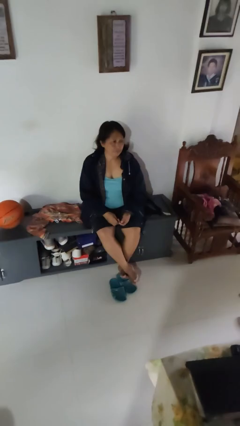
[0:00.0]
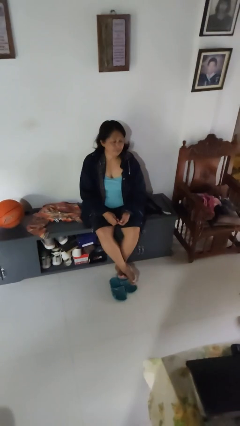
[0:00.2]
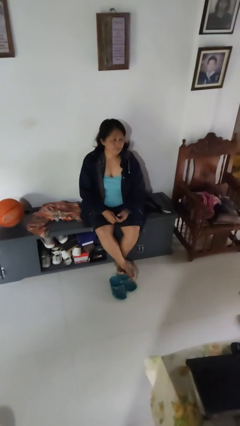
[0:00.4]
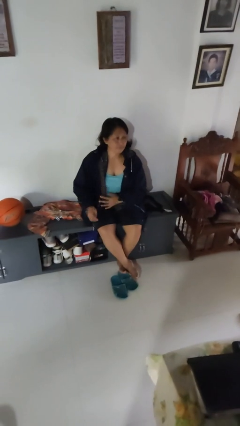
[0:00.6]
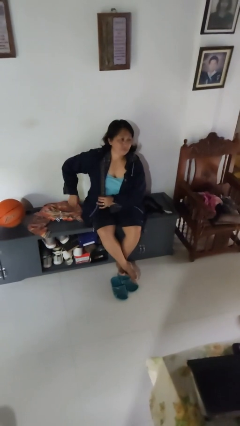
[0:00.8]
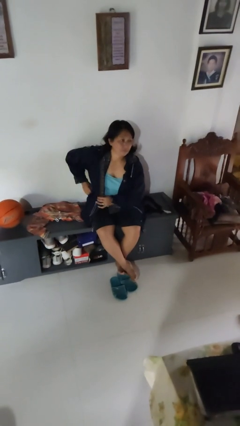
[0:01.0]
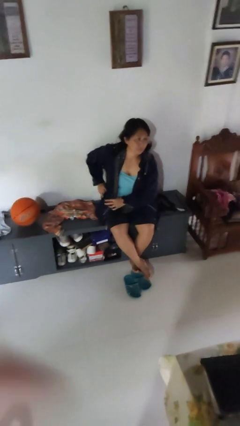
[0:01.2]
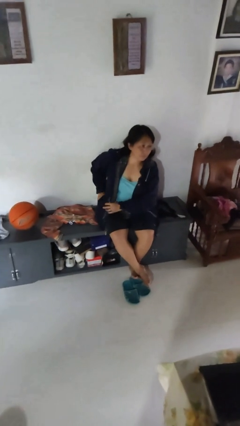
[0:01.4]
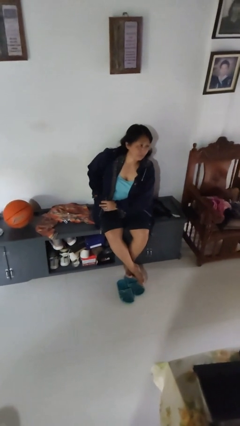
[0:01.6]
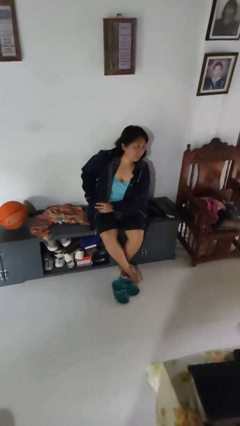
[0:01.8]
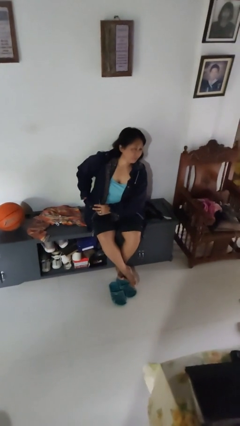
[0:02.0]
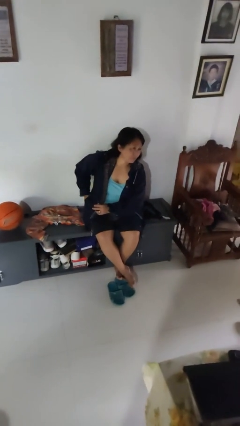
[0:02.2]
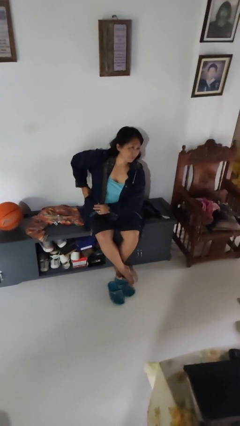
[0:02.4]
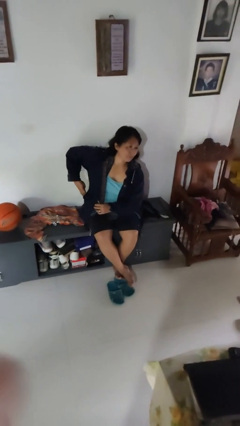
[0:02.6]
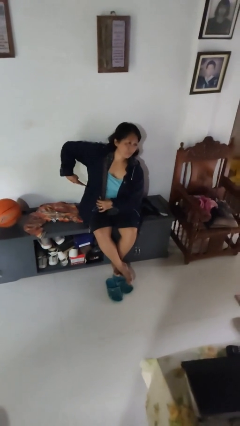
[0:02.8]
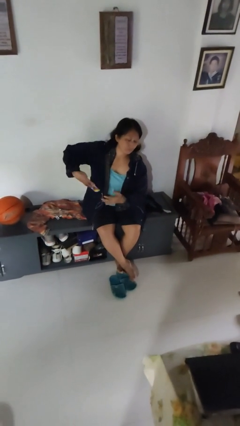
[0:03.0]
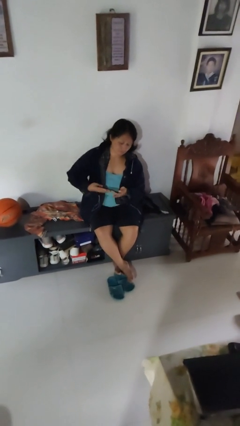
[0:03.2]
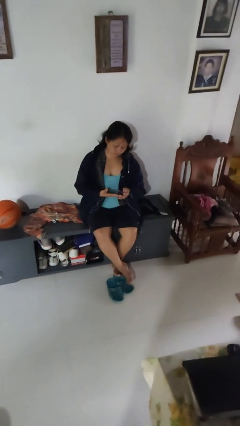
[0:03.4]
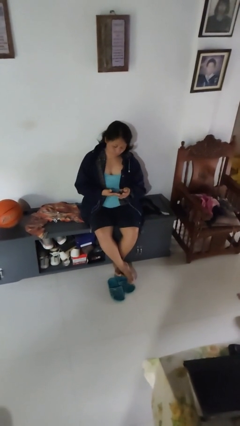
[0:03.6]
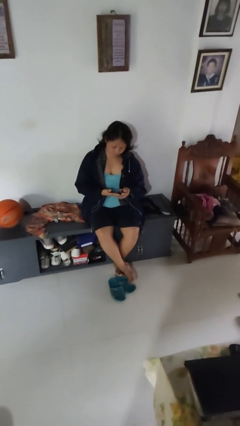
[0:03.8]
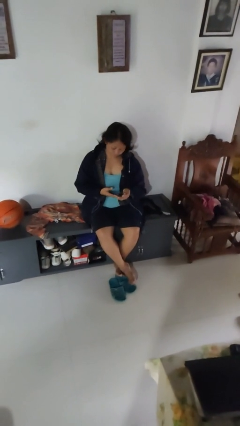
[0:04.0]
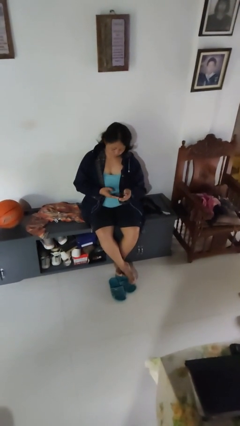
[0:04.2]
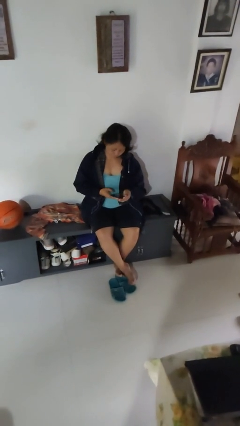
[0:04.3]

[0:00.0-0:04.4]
person takes phone from pocket

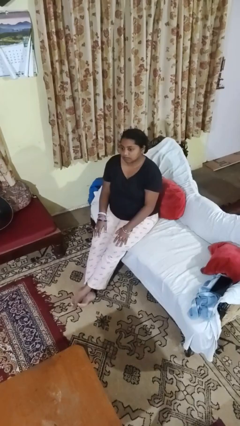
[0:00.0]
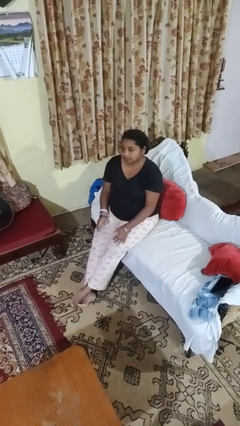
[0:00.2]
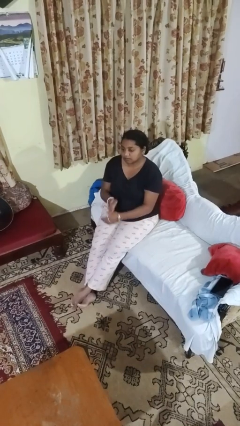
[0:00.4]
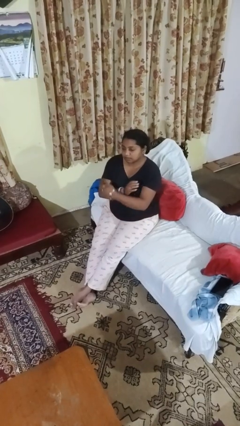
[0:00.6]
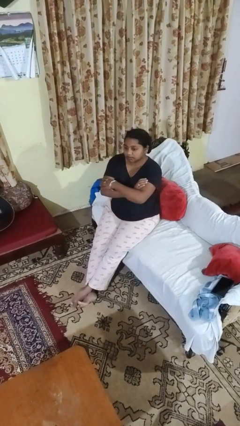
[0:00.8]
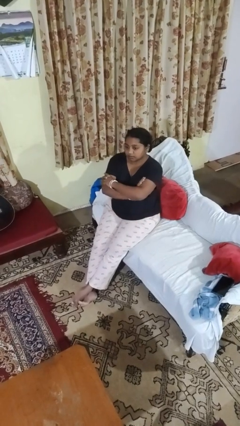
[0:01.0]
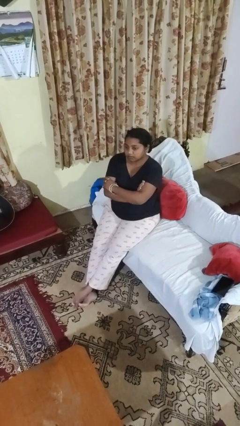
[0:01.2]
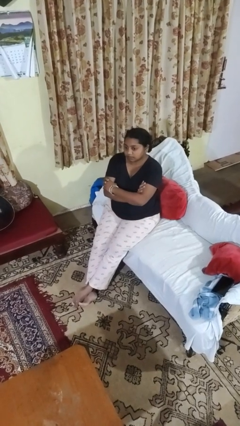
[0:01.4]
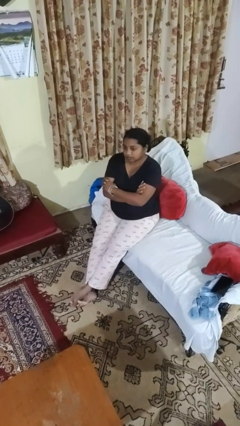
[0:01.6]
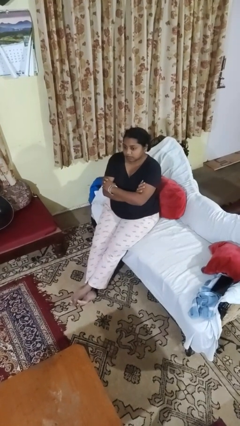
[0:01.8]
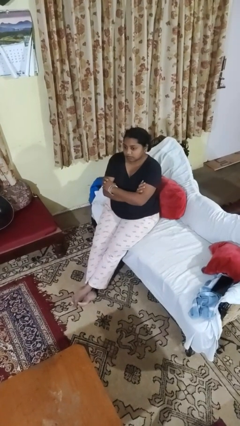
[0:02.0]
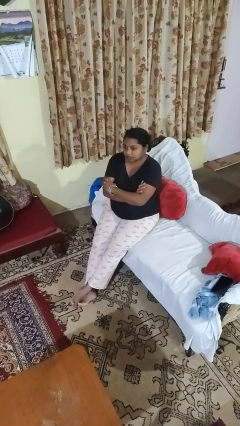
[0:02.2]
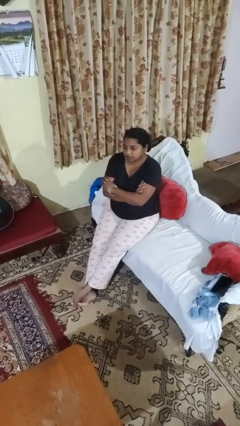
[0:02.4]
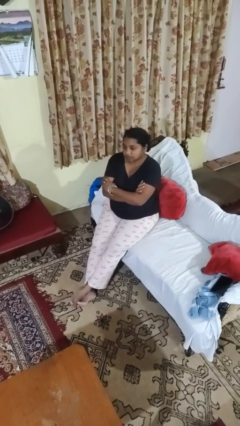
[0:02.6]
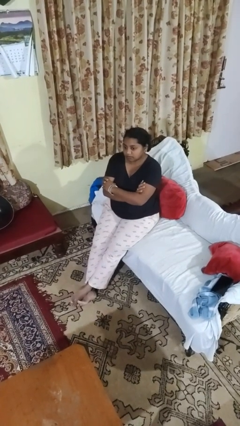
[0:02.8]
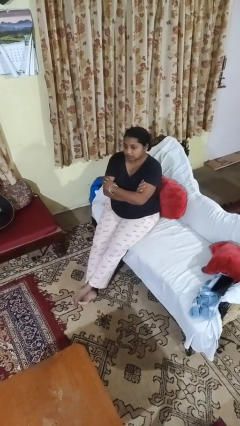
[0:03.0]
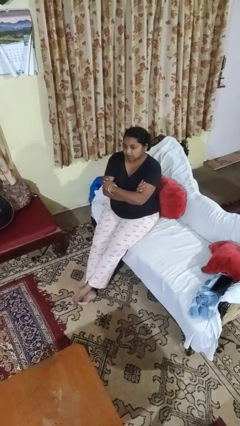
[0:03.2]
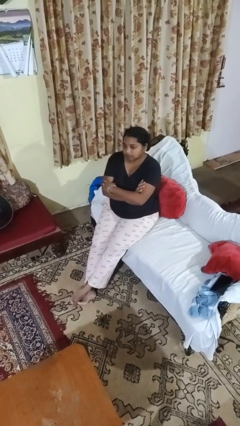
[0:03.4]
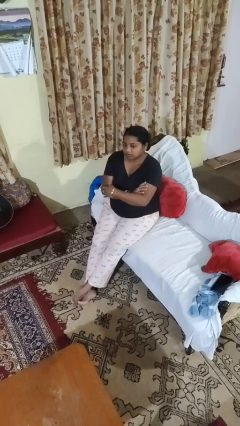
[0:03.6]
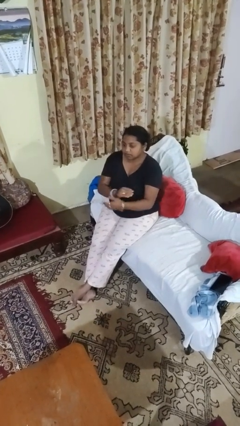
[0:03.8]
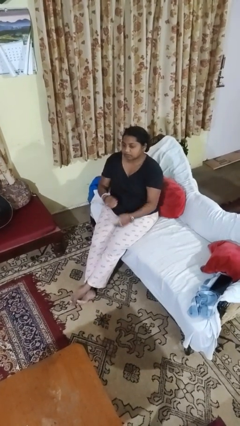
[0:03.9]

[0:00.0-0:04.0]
person crosses arms

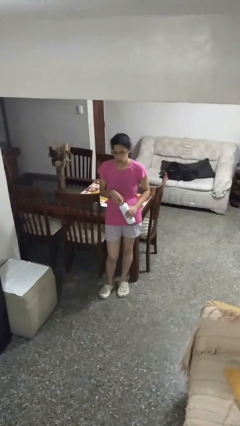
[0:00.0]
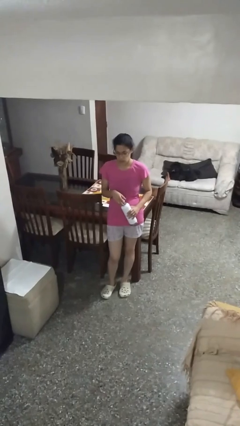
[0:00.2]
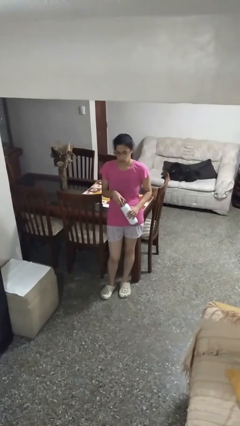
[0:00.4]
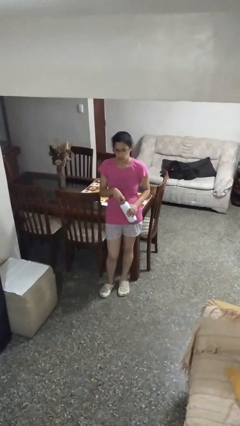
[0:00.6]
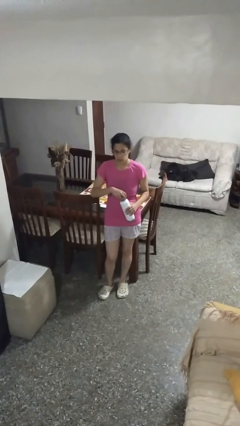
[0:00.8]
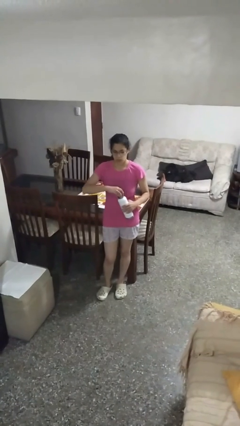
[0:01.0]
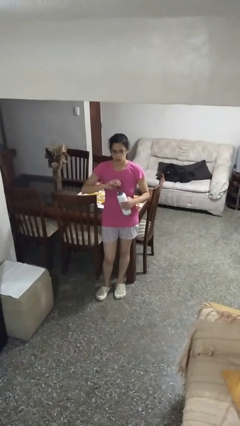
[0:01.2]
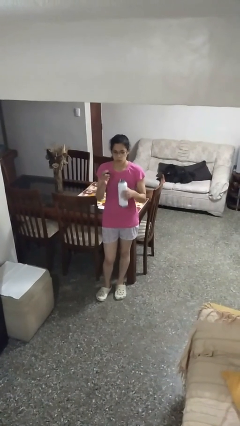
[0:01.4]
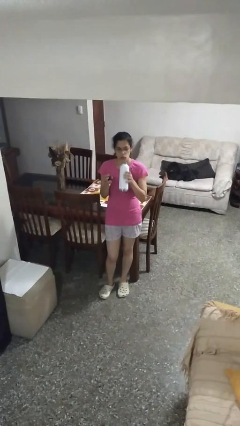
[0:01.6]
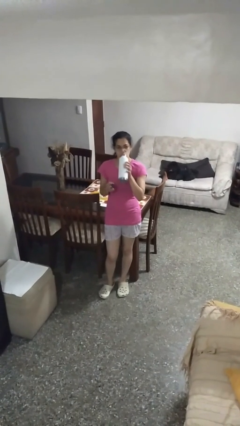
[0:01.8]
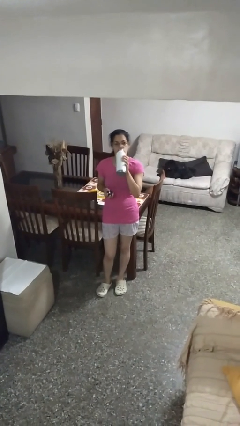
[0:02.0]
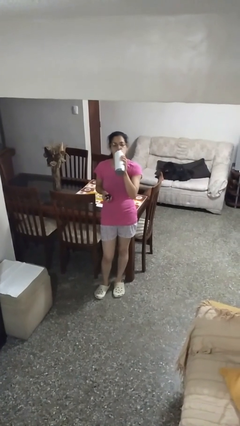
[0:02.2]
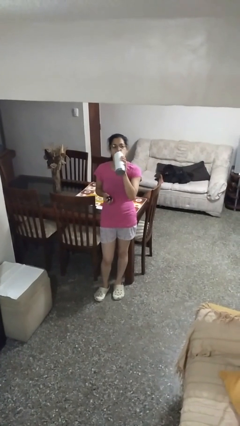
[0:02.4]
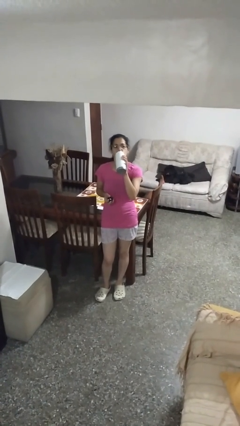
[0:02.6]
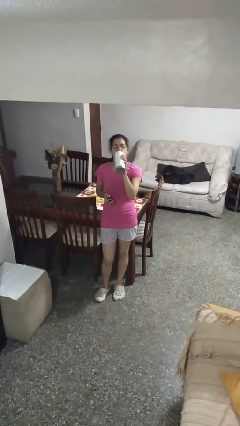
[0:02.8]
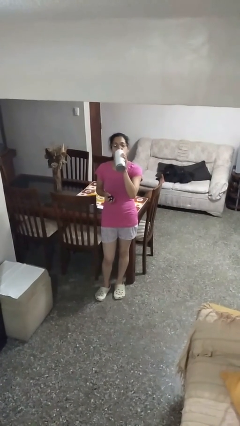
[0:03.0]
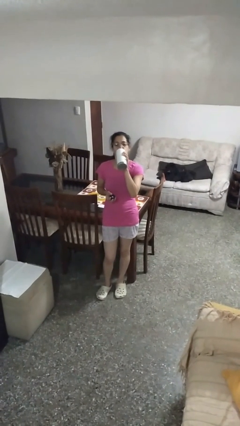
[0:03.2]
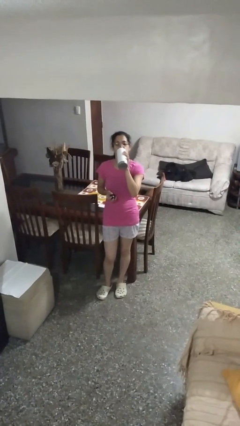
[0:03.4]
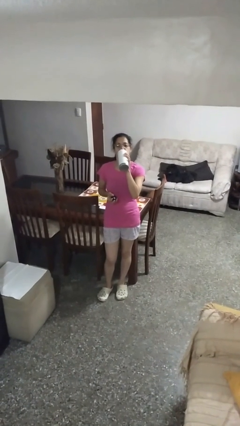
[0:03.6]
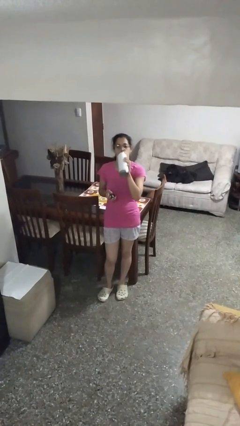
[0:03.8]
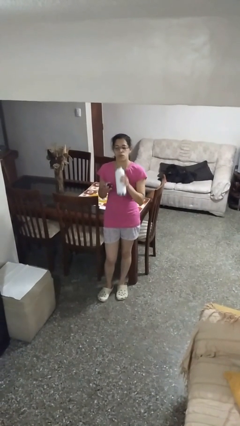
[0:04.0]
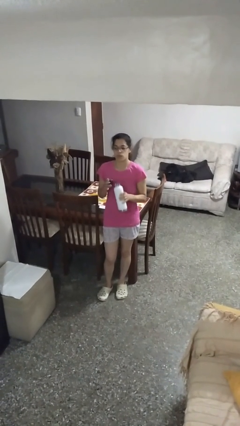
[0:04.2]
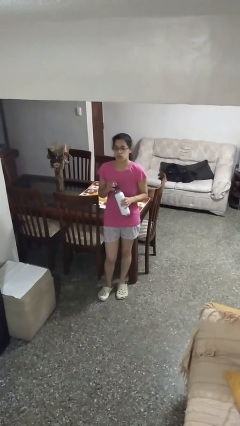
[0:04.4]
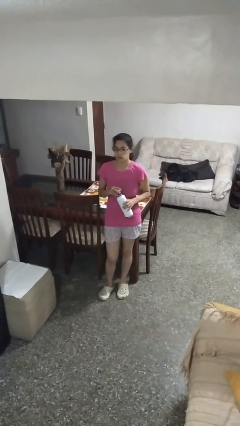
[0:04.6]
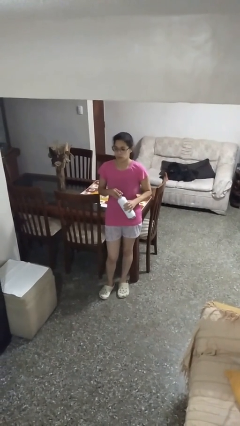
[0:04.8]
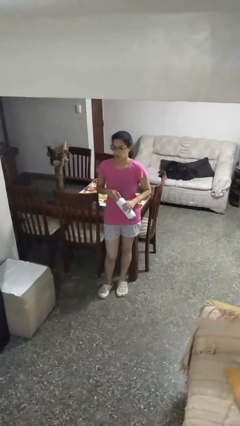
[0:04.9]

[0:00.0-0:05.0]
person drinks from bottle

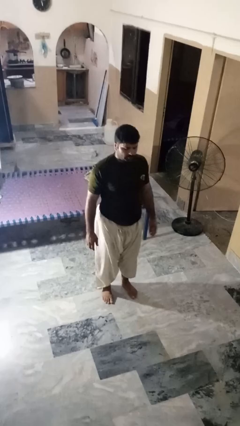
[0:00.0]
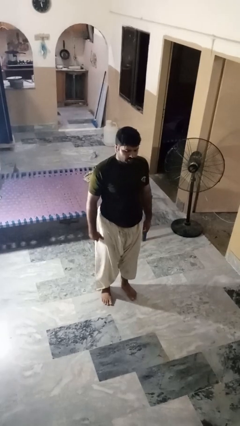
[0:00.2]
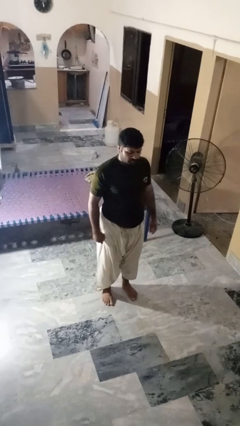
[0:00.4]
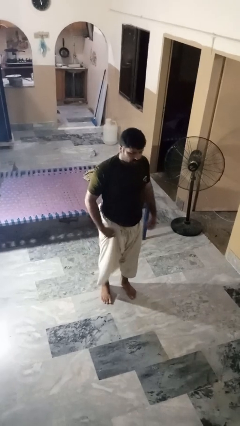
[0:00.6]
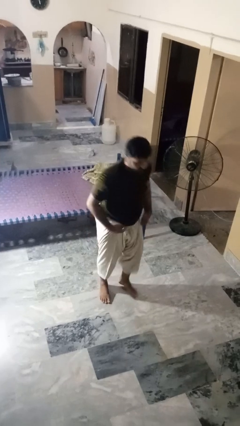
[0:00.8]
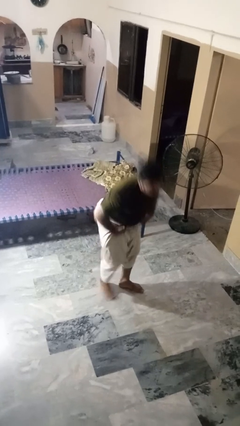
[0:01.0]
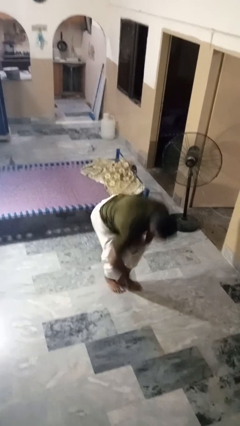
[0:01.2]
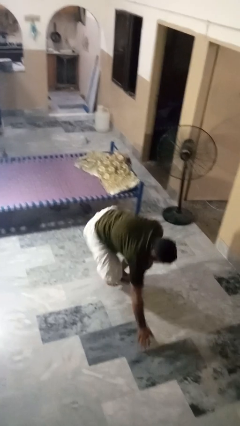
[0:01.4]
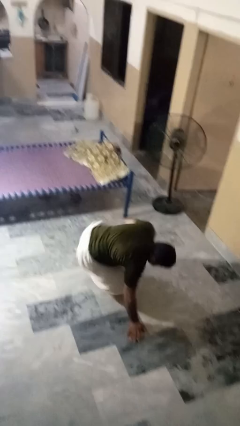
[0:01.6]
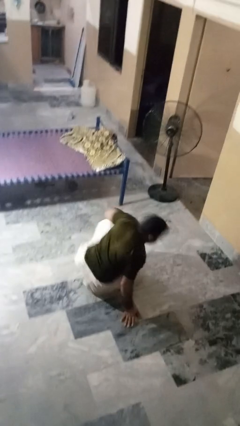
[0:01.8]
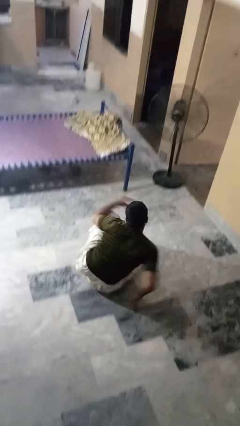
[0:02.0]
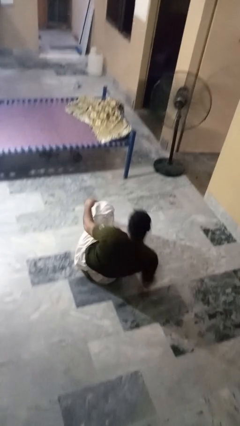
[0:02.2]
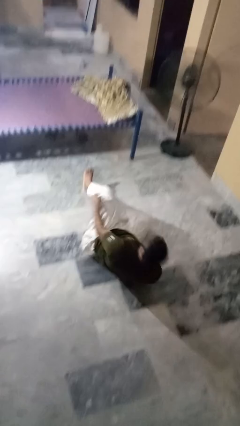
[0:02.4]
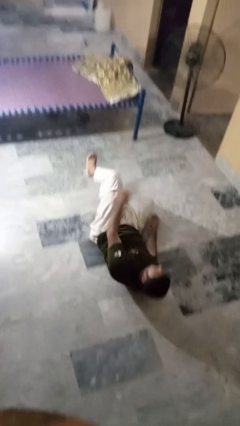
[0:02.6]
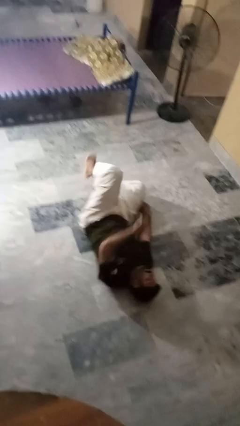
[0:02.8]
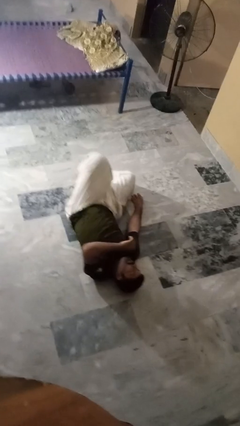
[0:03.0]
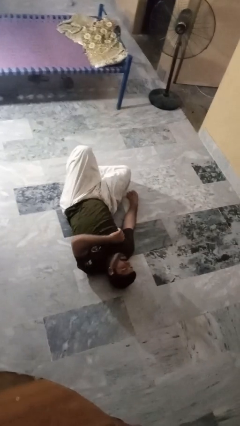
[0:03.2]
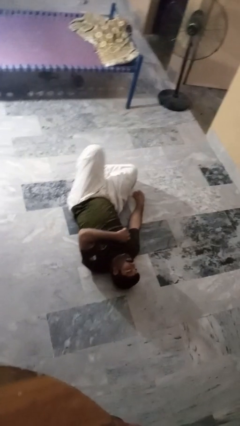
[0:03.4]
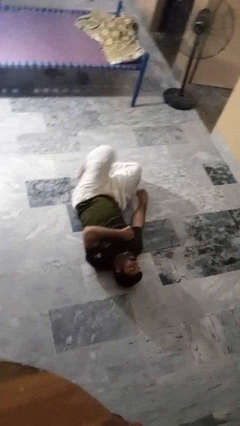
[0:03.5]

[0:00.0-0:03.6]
person falls while standing

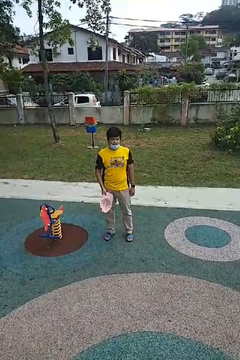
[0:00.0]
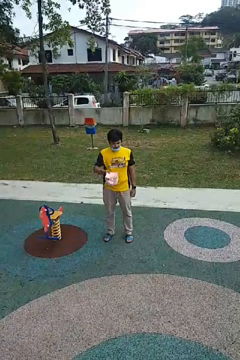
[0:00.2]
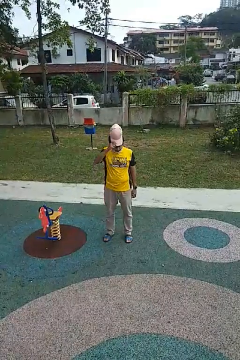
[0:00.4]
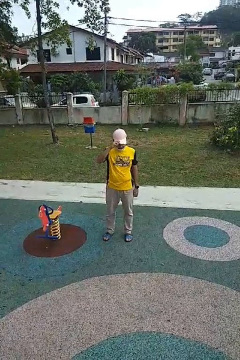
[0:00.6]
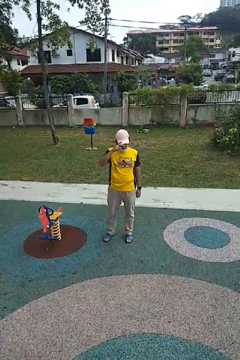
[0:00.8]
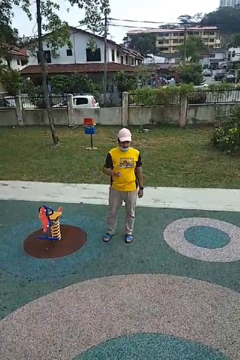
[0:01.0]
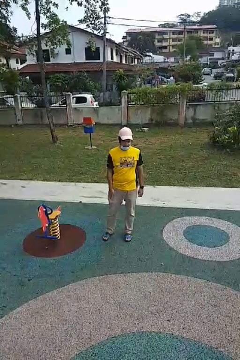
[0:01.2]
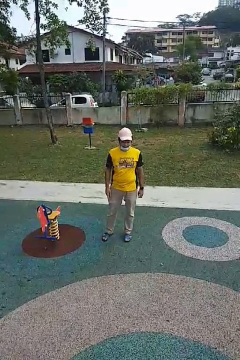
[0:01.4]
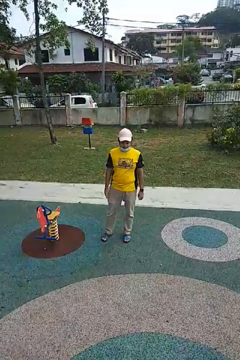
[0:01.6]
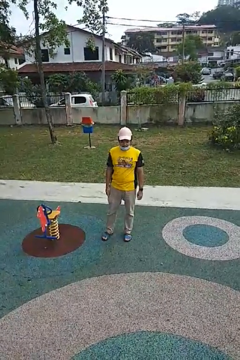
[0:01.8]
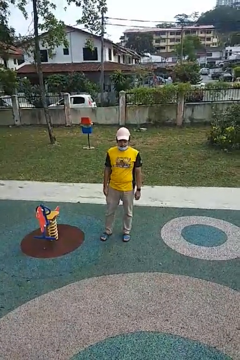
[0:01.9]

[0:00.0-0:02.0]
person puts on hat
